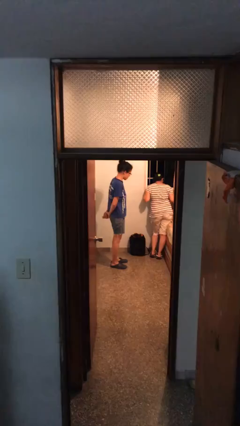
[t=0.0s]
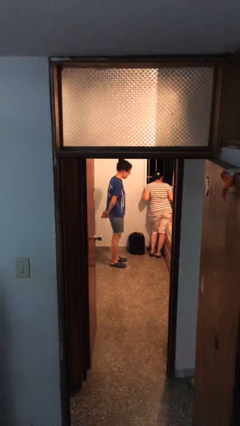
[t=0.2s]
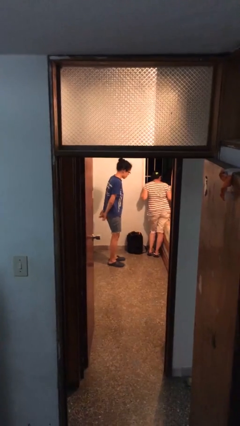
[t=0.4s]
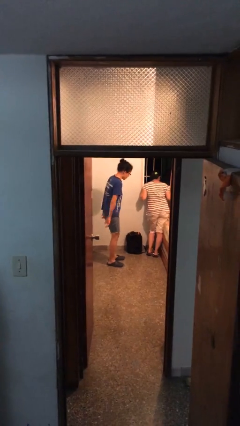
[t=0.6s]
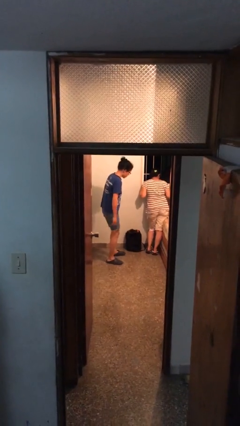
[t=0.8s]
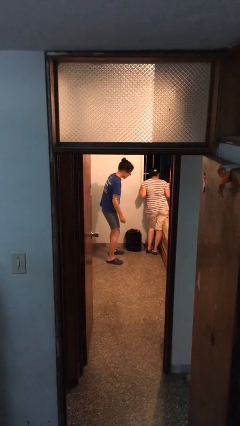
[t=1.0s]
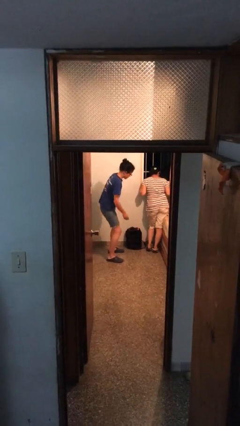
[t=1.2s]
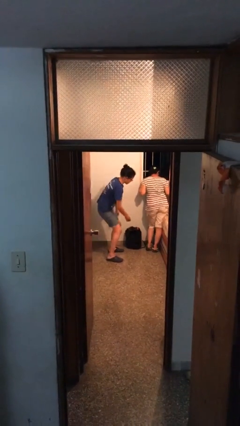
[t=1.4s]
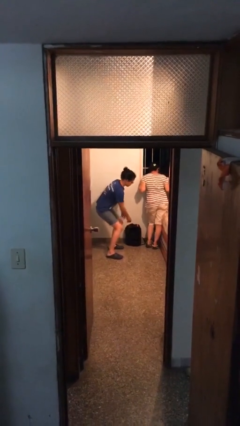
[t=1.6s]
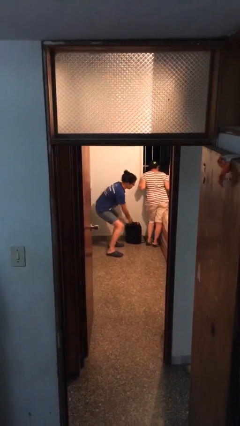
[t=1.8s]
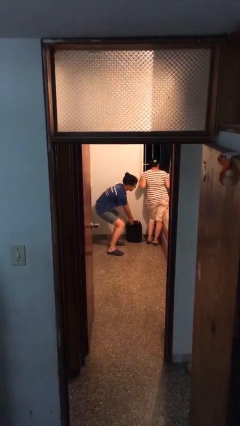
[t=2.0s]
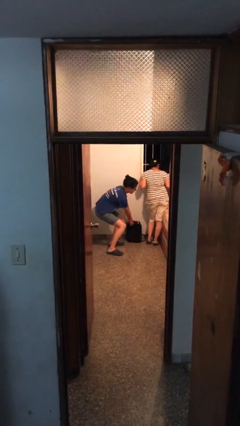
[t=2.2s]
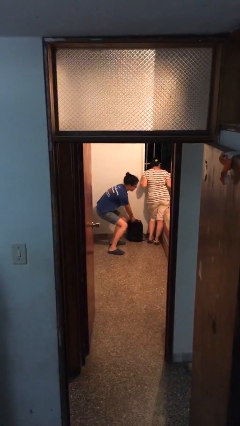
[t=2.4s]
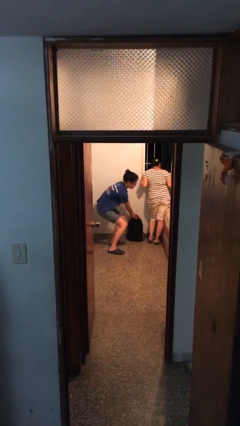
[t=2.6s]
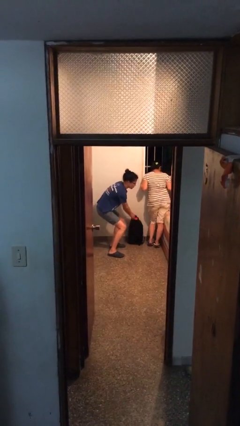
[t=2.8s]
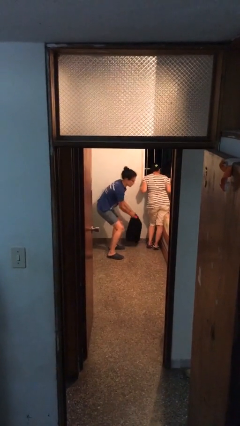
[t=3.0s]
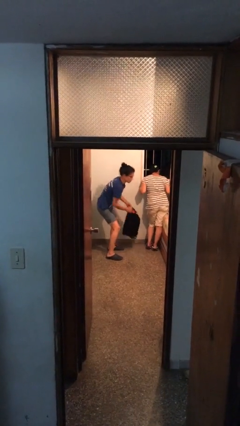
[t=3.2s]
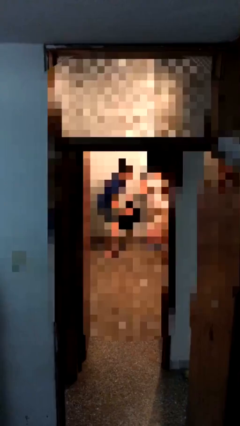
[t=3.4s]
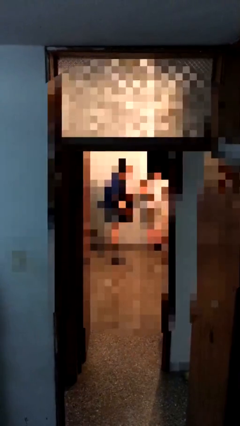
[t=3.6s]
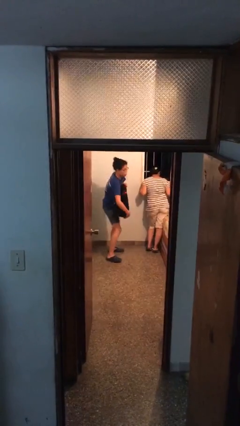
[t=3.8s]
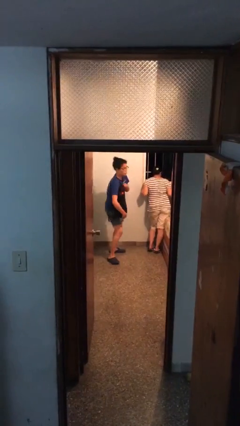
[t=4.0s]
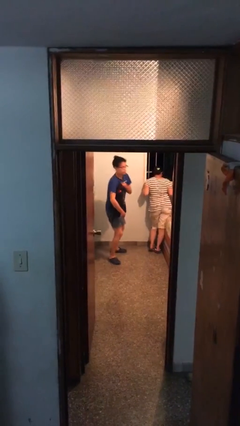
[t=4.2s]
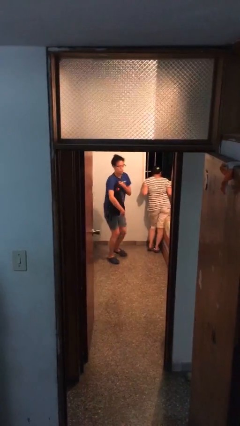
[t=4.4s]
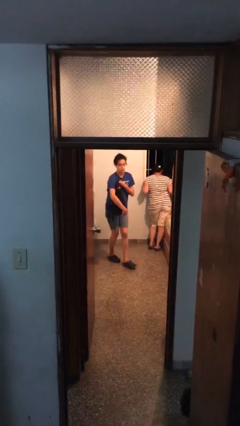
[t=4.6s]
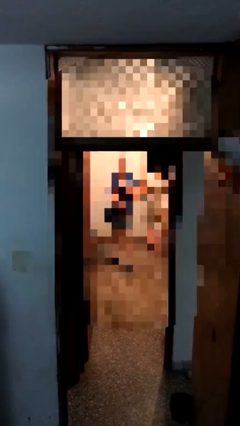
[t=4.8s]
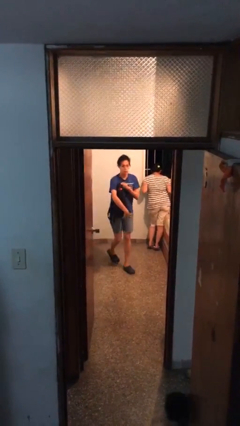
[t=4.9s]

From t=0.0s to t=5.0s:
person steals object from person

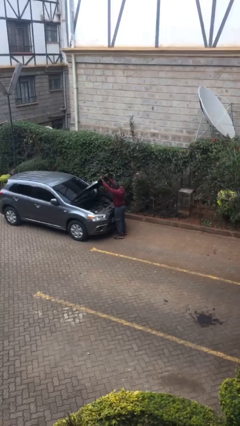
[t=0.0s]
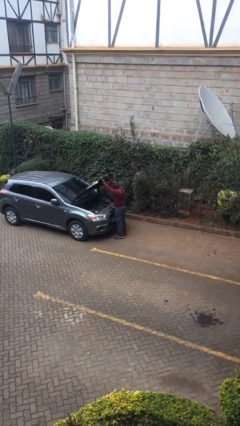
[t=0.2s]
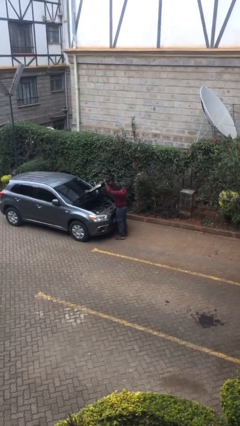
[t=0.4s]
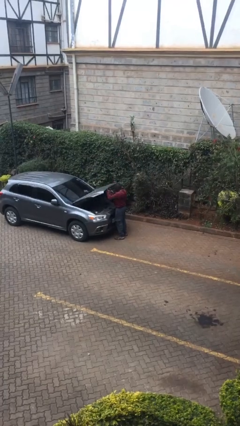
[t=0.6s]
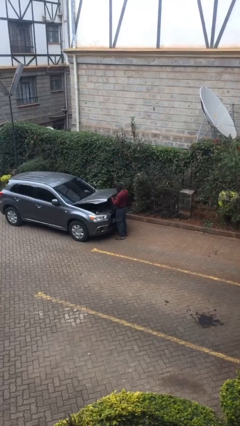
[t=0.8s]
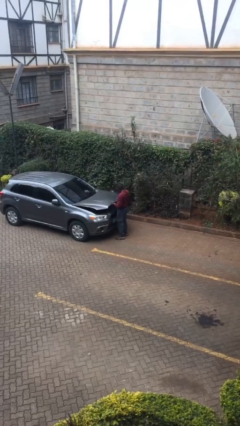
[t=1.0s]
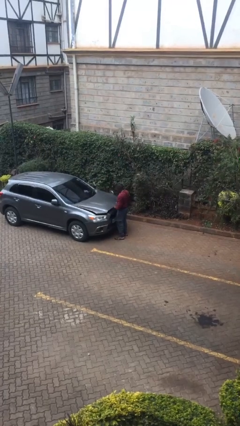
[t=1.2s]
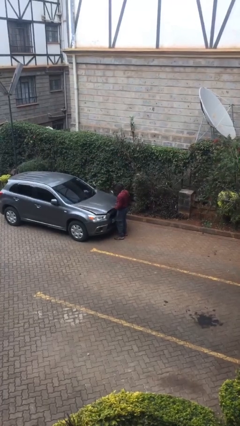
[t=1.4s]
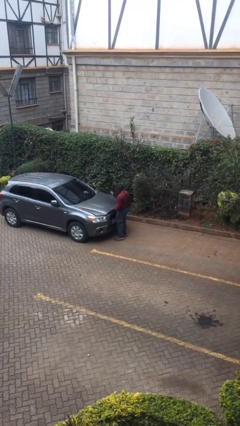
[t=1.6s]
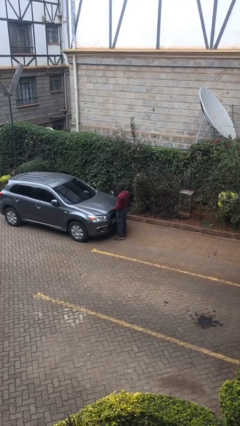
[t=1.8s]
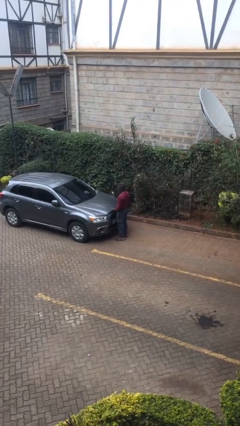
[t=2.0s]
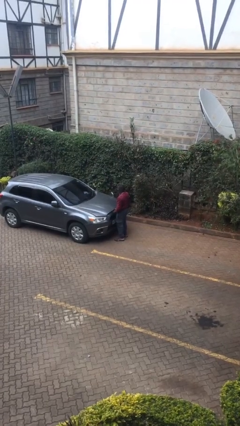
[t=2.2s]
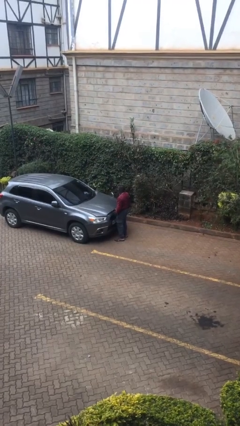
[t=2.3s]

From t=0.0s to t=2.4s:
person closes car hood

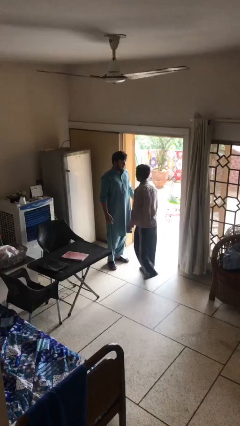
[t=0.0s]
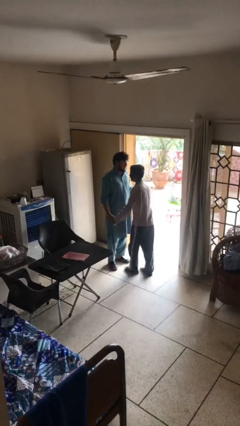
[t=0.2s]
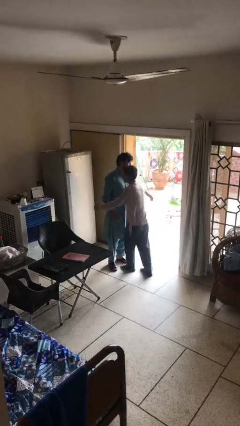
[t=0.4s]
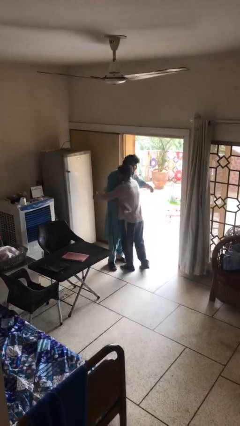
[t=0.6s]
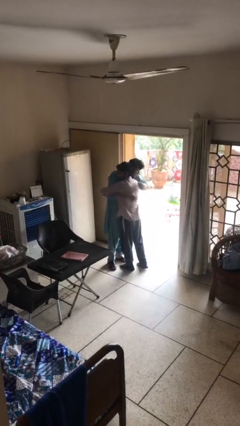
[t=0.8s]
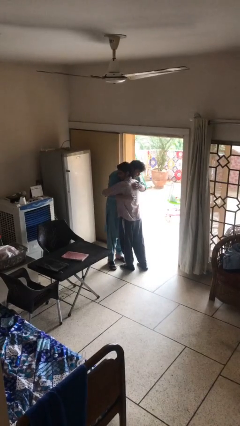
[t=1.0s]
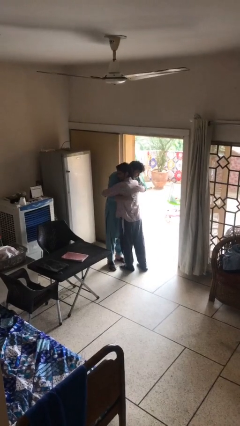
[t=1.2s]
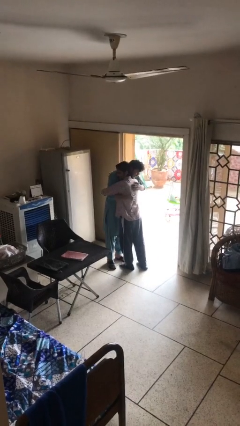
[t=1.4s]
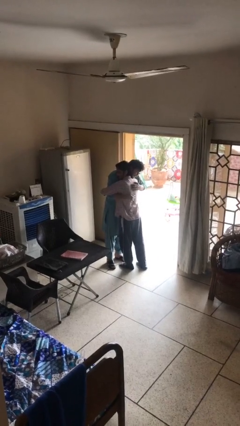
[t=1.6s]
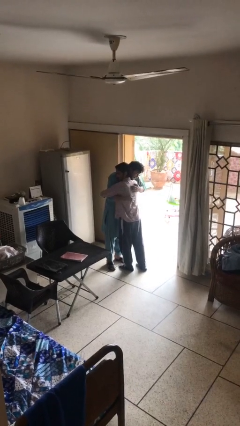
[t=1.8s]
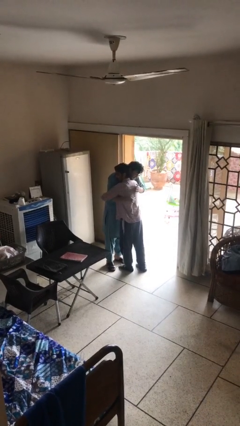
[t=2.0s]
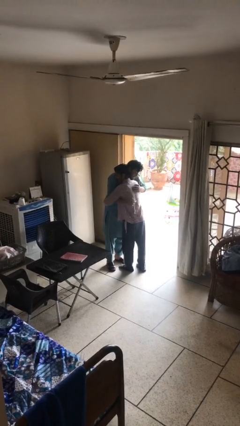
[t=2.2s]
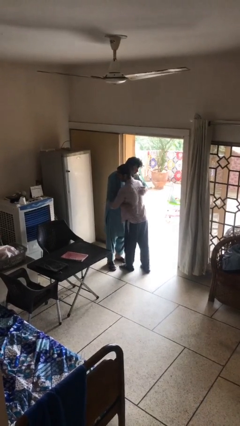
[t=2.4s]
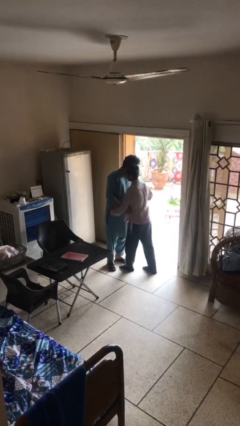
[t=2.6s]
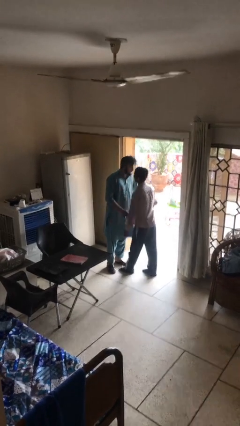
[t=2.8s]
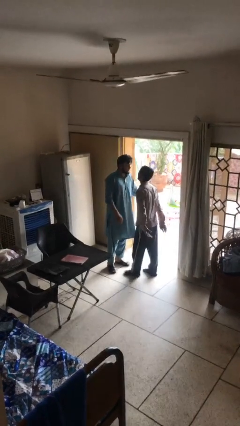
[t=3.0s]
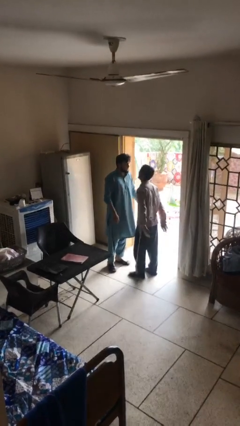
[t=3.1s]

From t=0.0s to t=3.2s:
person embraces person

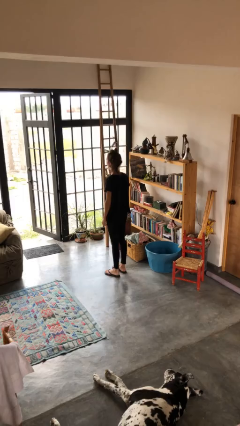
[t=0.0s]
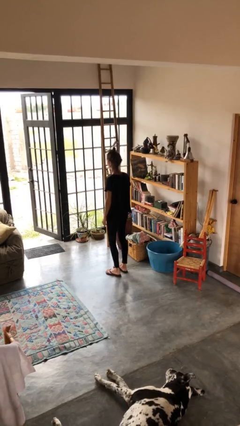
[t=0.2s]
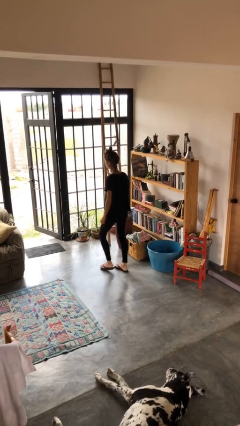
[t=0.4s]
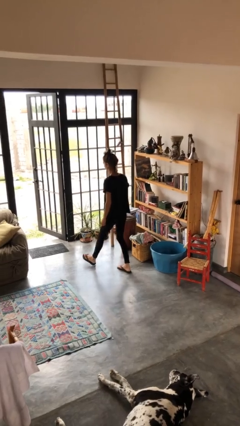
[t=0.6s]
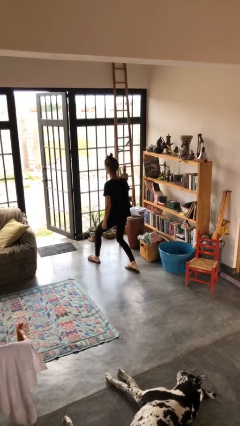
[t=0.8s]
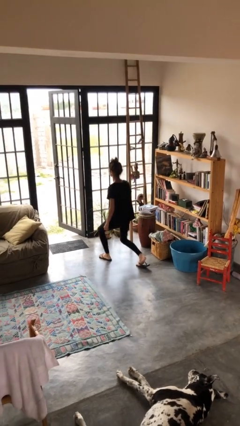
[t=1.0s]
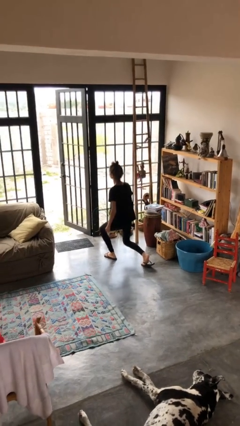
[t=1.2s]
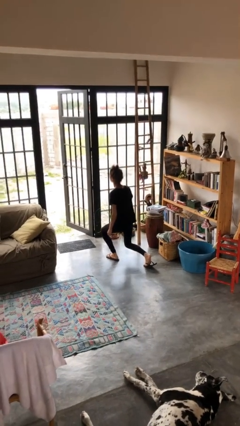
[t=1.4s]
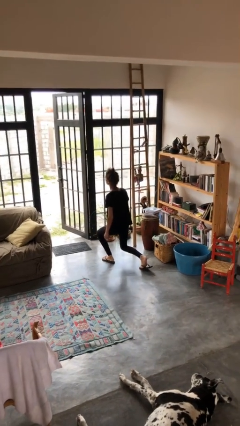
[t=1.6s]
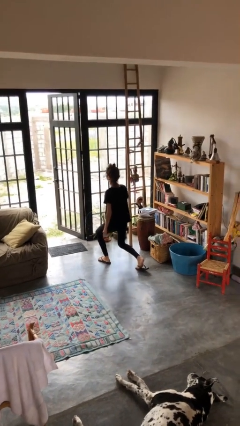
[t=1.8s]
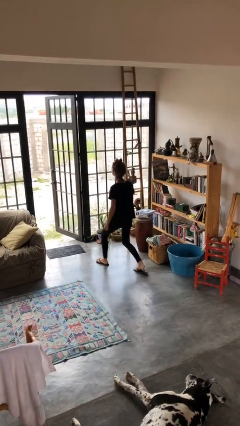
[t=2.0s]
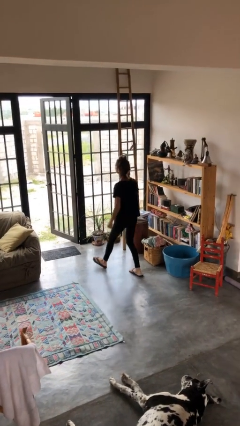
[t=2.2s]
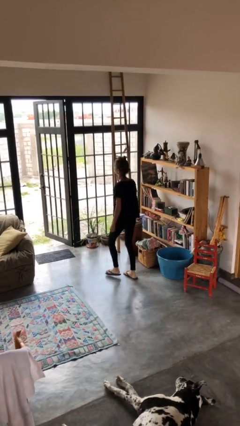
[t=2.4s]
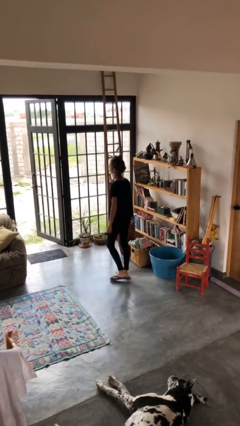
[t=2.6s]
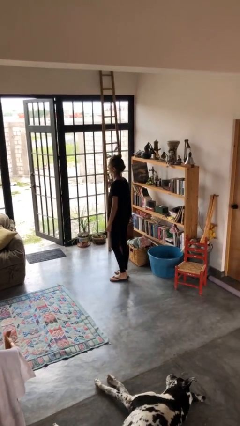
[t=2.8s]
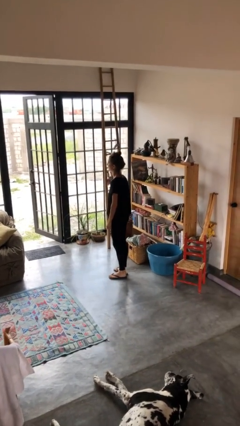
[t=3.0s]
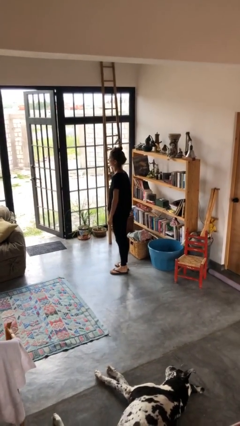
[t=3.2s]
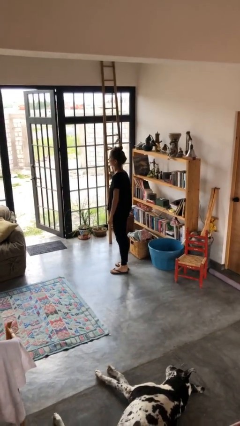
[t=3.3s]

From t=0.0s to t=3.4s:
person exercises with lunges

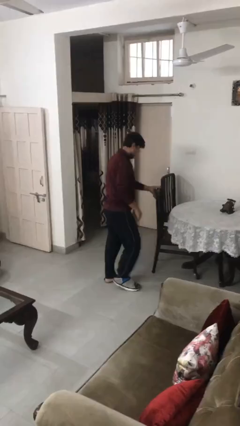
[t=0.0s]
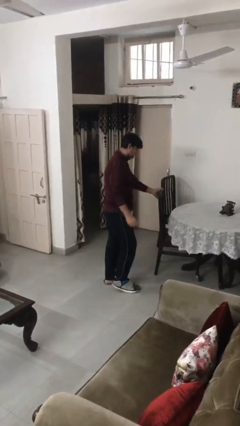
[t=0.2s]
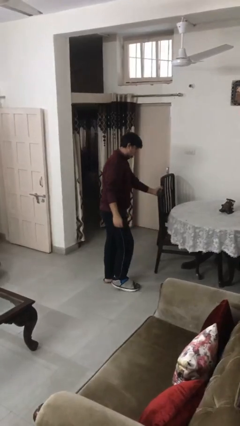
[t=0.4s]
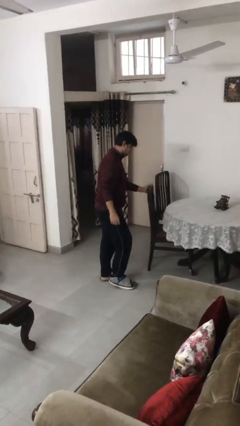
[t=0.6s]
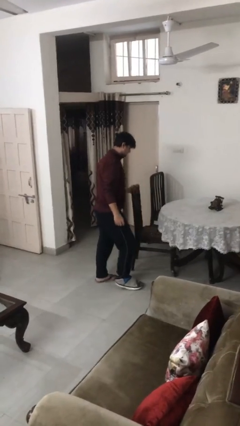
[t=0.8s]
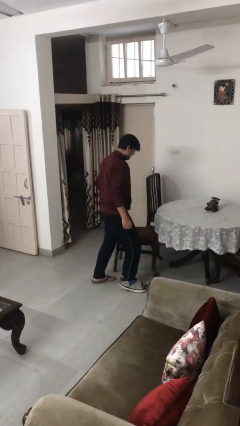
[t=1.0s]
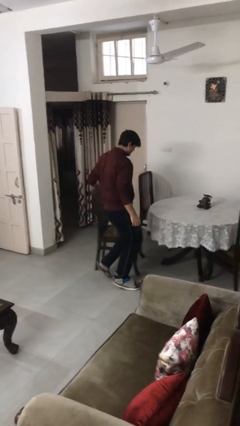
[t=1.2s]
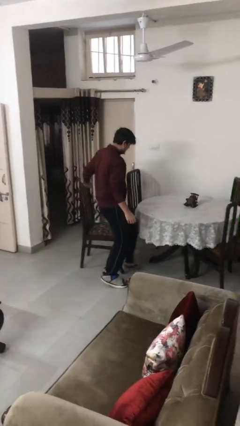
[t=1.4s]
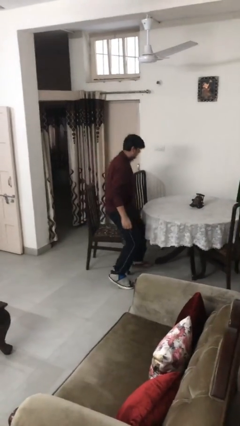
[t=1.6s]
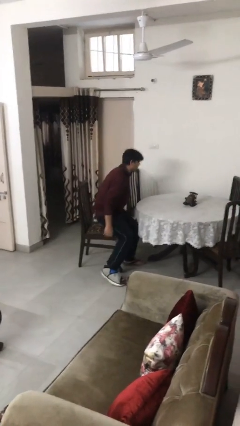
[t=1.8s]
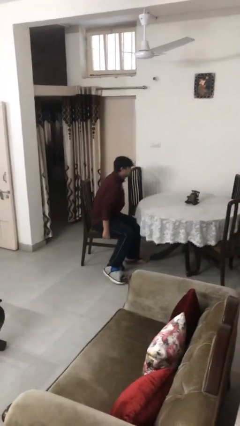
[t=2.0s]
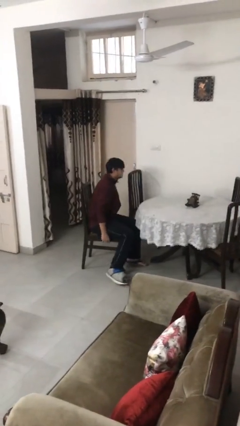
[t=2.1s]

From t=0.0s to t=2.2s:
person sits down

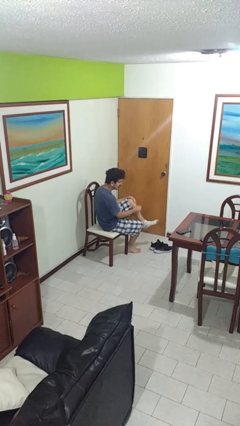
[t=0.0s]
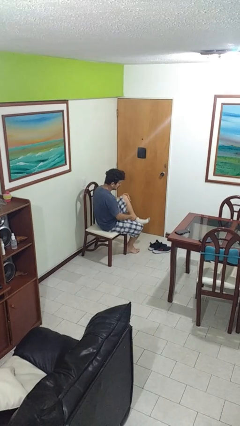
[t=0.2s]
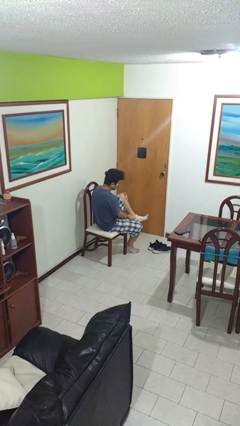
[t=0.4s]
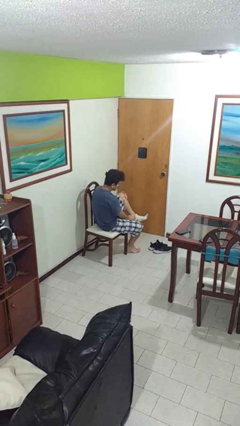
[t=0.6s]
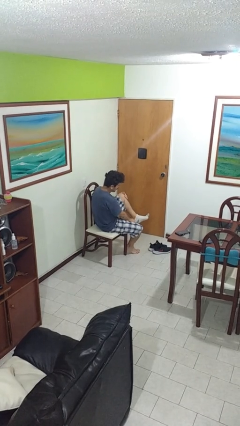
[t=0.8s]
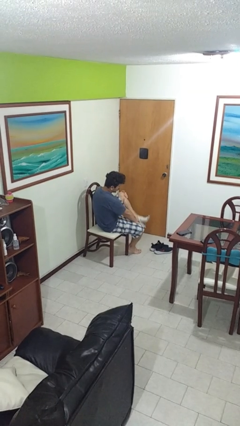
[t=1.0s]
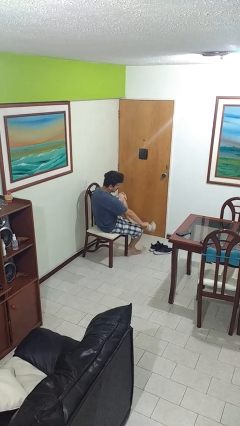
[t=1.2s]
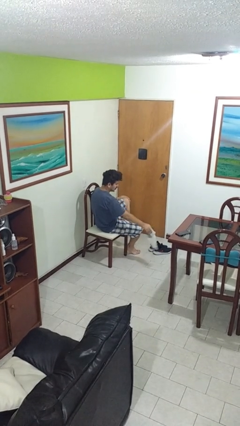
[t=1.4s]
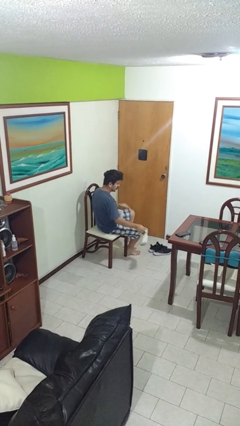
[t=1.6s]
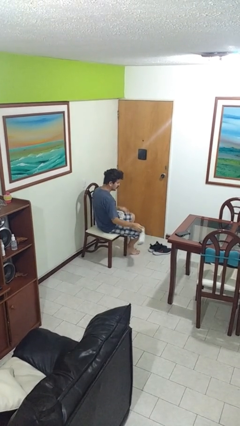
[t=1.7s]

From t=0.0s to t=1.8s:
person takes off socks
